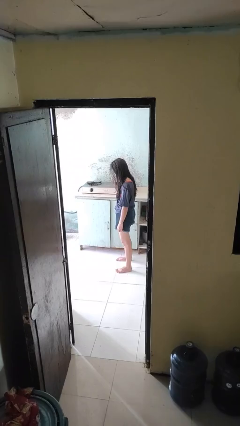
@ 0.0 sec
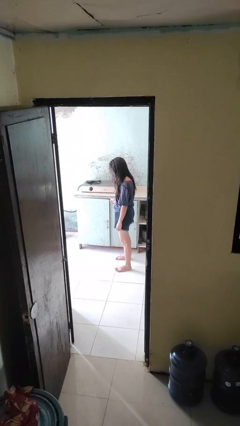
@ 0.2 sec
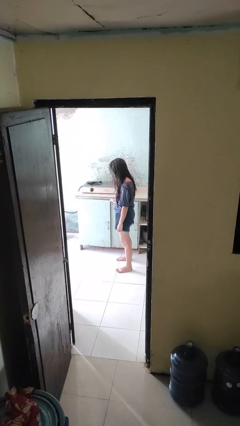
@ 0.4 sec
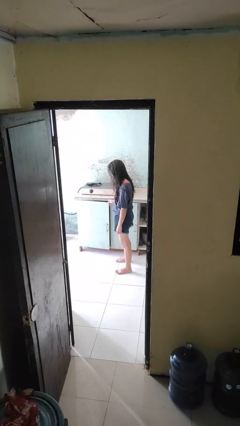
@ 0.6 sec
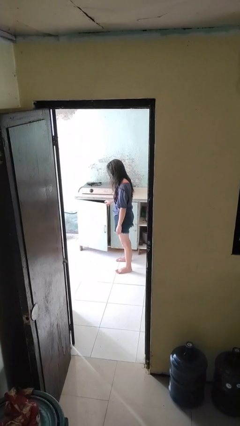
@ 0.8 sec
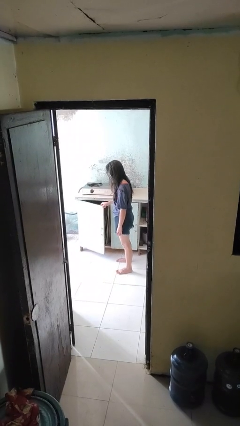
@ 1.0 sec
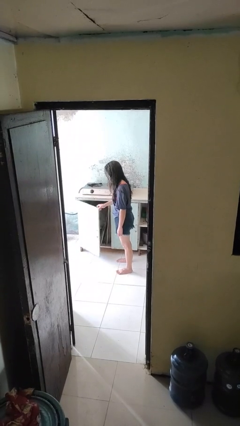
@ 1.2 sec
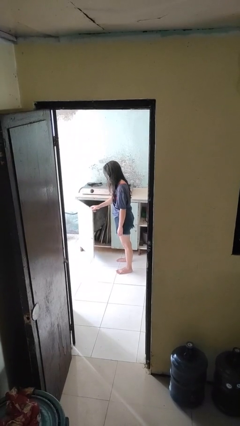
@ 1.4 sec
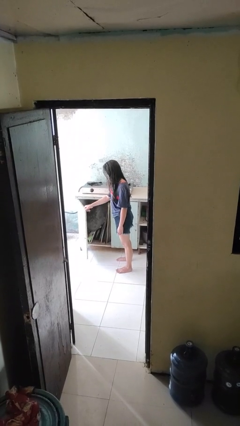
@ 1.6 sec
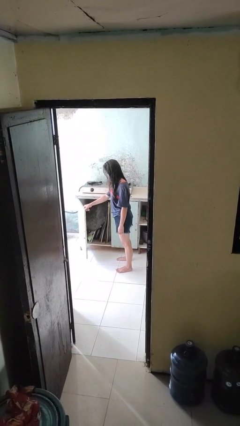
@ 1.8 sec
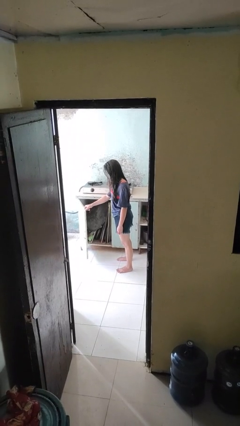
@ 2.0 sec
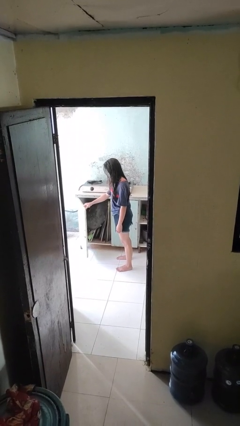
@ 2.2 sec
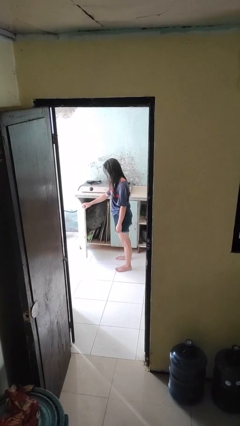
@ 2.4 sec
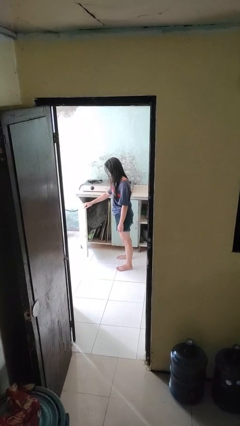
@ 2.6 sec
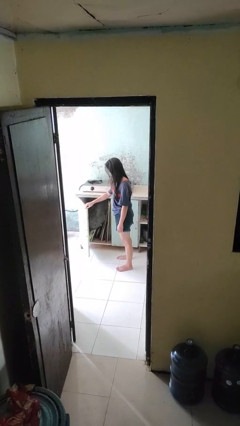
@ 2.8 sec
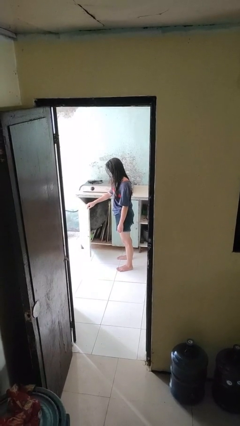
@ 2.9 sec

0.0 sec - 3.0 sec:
person opens cabinet

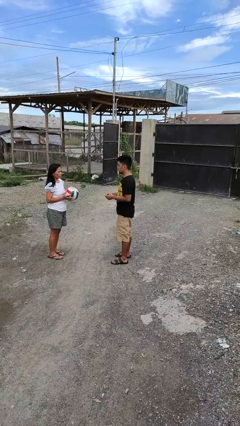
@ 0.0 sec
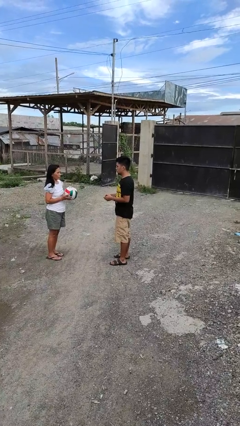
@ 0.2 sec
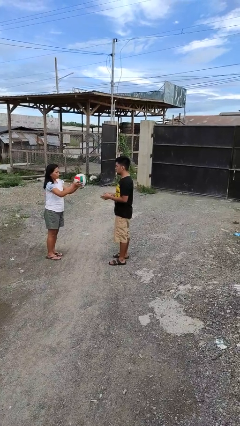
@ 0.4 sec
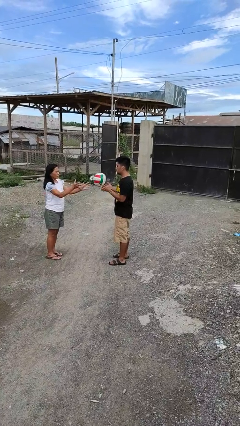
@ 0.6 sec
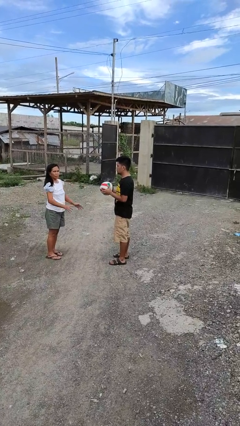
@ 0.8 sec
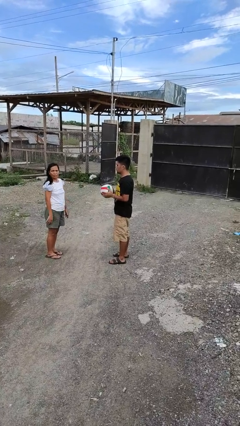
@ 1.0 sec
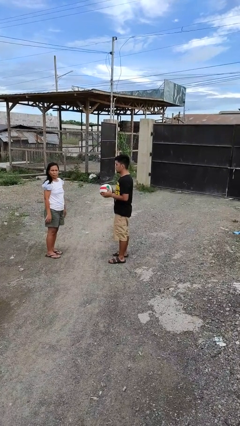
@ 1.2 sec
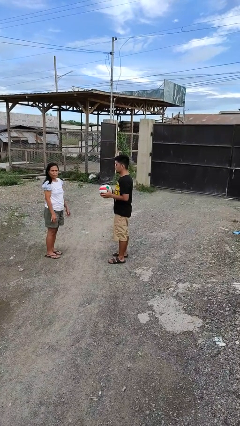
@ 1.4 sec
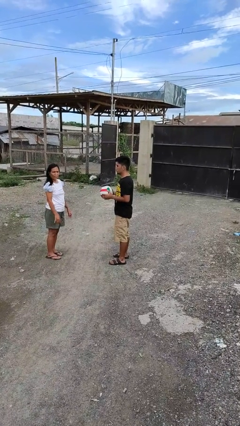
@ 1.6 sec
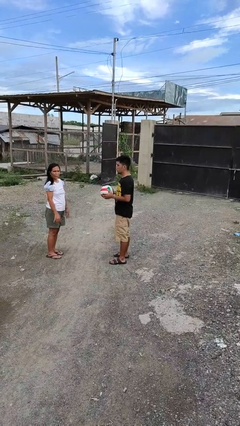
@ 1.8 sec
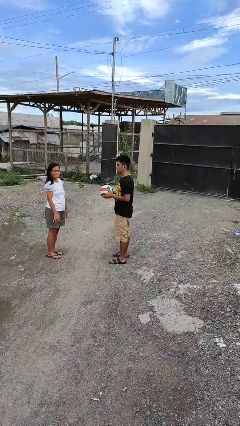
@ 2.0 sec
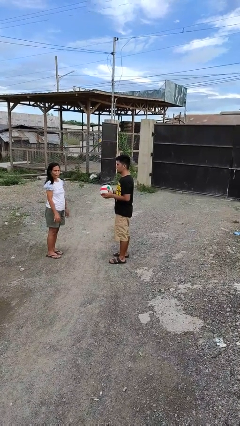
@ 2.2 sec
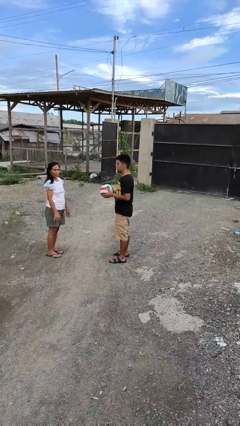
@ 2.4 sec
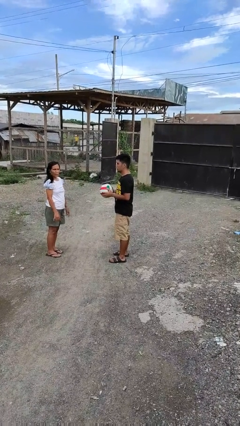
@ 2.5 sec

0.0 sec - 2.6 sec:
person catches object from person

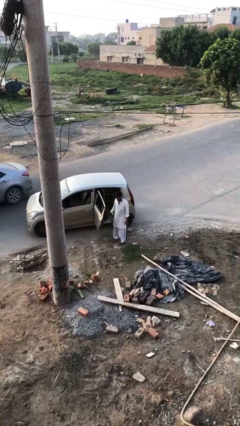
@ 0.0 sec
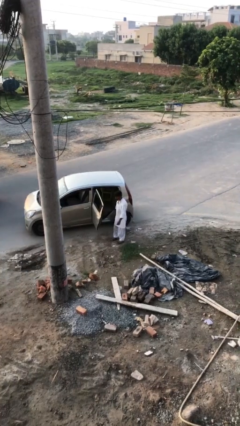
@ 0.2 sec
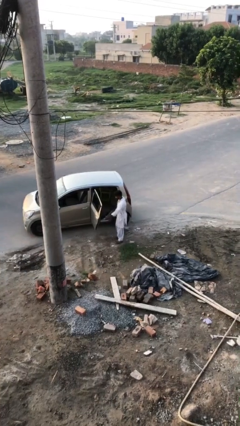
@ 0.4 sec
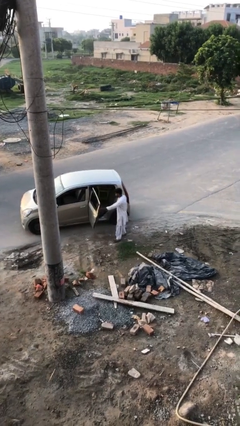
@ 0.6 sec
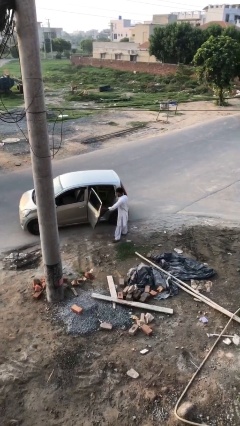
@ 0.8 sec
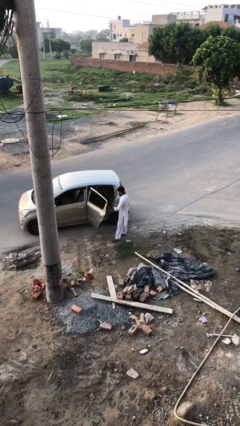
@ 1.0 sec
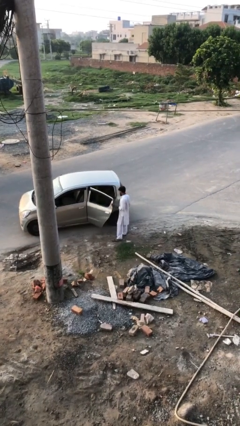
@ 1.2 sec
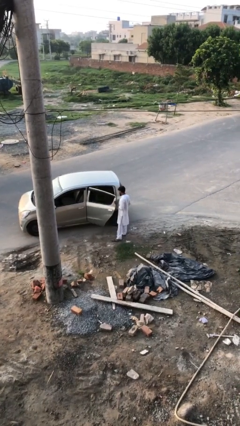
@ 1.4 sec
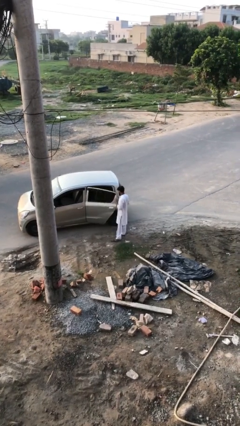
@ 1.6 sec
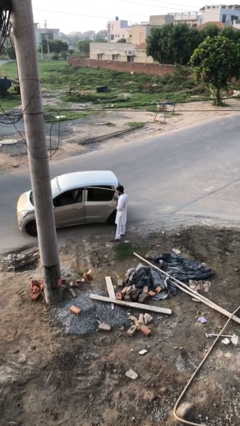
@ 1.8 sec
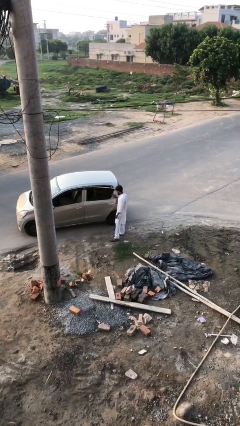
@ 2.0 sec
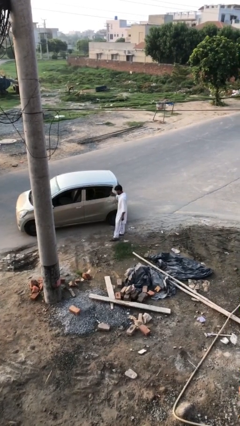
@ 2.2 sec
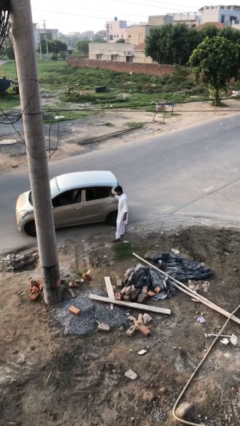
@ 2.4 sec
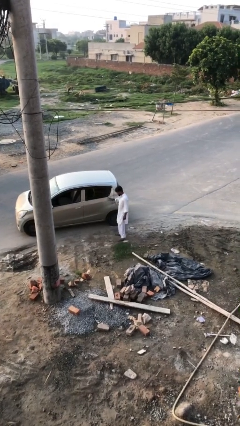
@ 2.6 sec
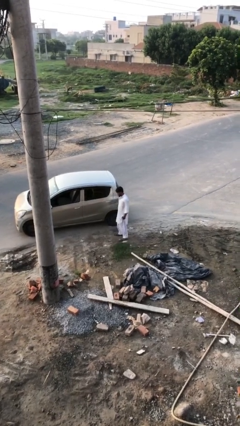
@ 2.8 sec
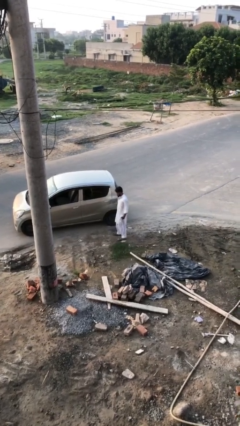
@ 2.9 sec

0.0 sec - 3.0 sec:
person closes car door

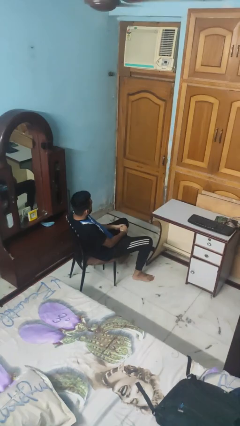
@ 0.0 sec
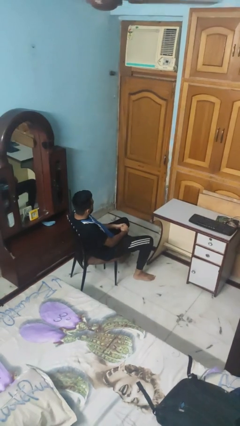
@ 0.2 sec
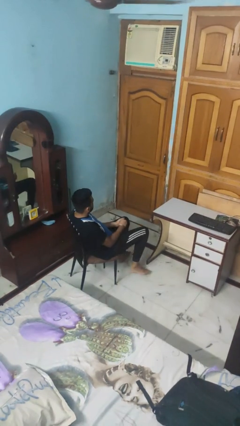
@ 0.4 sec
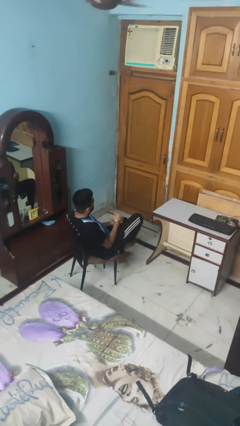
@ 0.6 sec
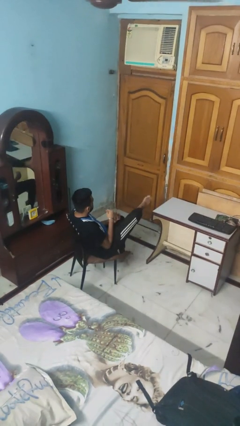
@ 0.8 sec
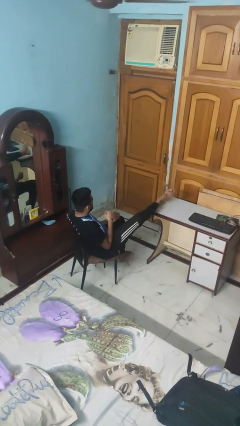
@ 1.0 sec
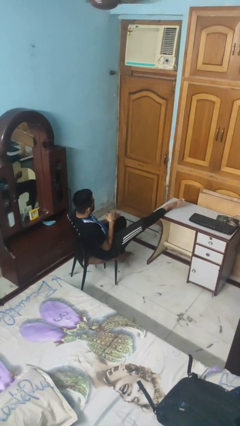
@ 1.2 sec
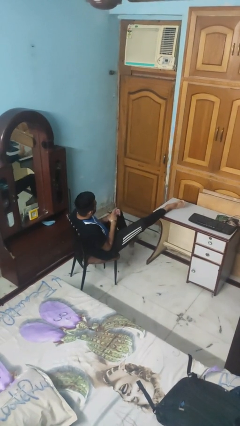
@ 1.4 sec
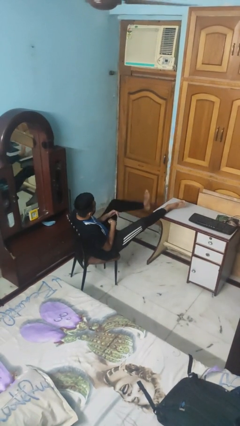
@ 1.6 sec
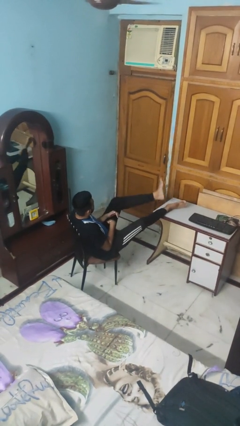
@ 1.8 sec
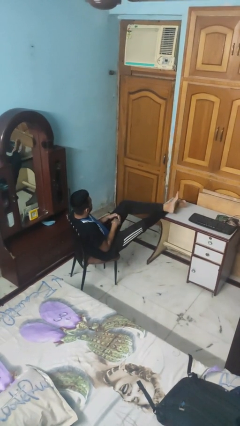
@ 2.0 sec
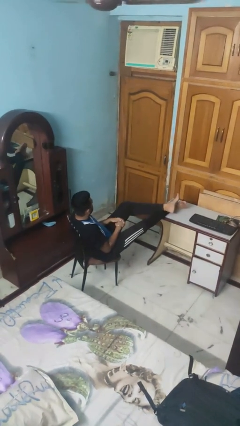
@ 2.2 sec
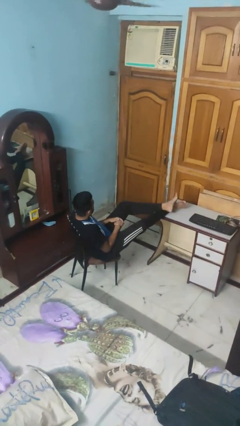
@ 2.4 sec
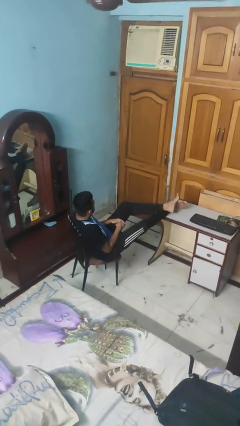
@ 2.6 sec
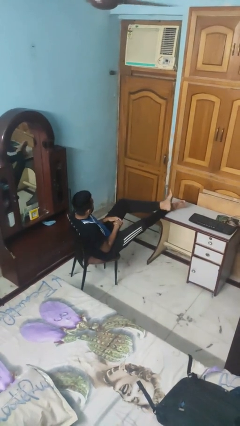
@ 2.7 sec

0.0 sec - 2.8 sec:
person puts feet up

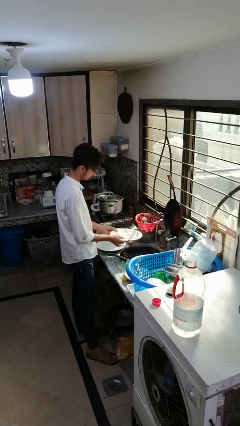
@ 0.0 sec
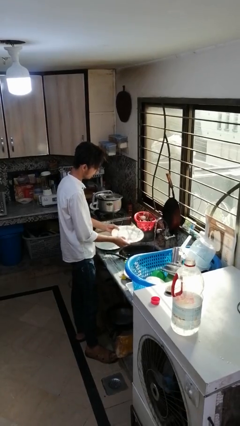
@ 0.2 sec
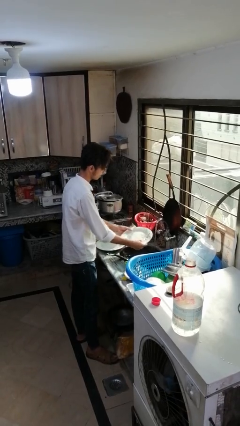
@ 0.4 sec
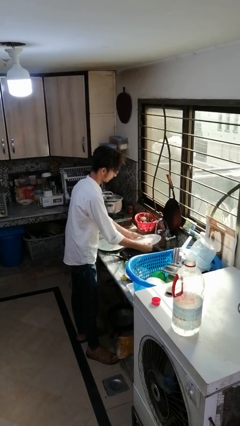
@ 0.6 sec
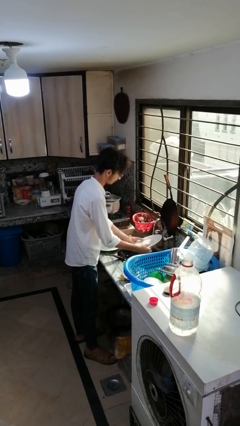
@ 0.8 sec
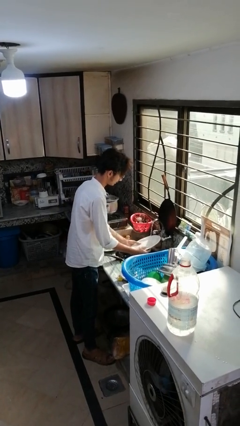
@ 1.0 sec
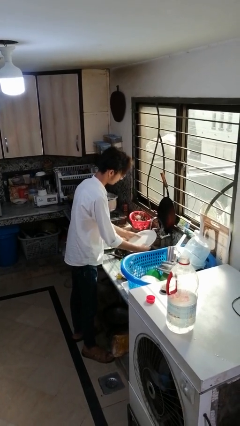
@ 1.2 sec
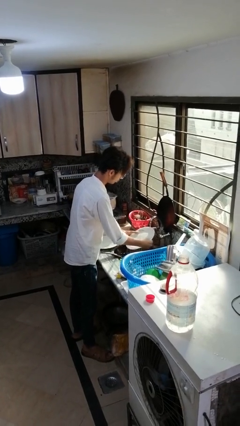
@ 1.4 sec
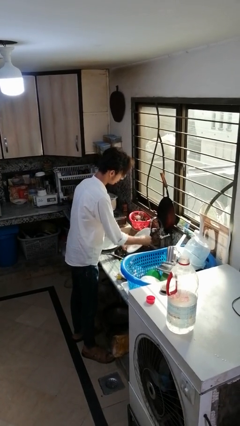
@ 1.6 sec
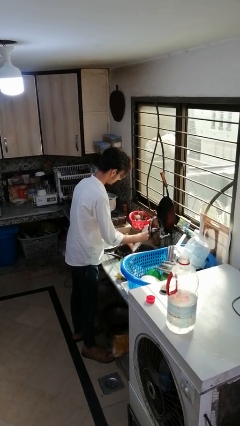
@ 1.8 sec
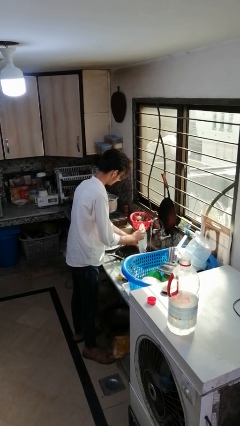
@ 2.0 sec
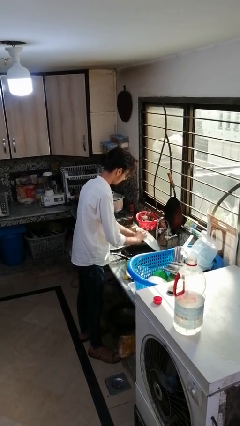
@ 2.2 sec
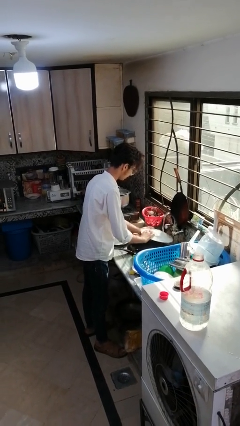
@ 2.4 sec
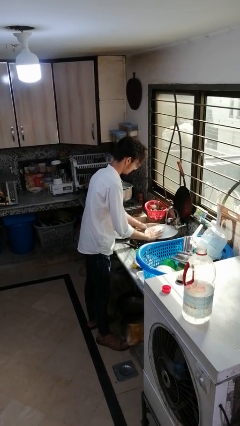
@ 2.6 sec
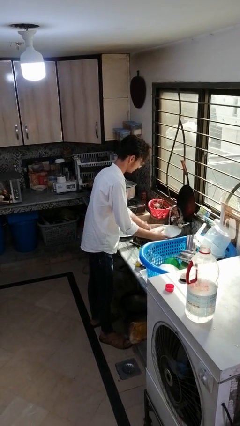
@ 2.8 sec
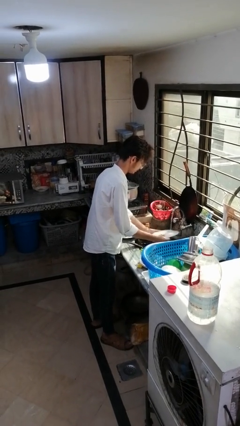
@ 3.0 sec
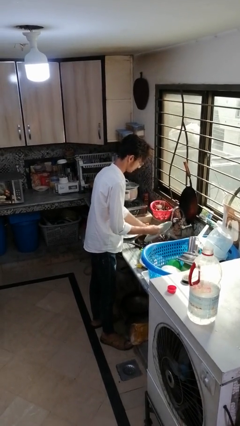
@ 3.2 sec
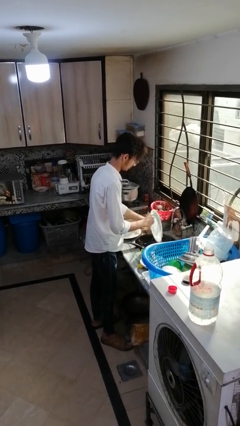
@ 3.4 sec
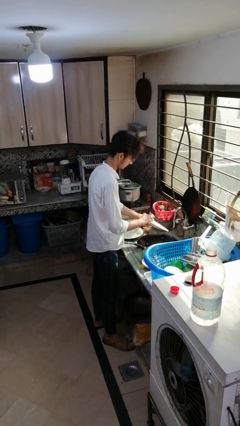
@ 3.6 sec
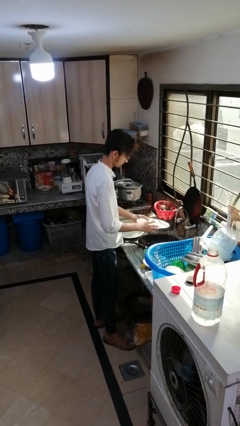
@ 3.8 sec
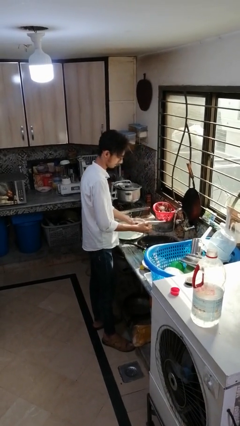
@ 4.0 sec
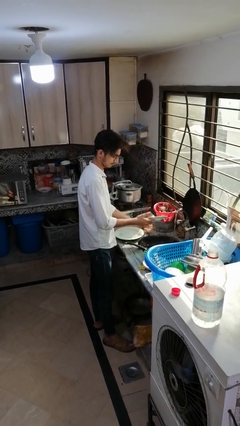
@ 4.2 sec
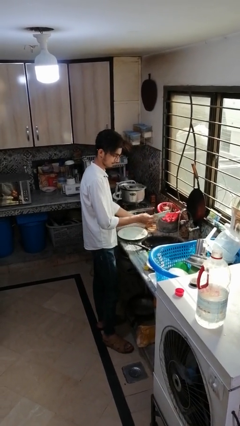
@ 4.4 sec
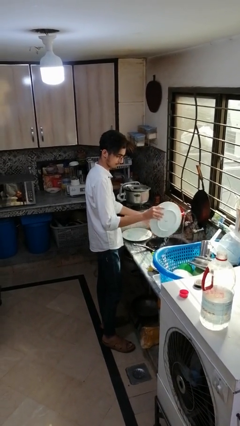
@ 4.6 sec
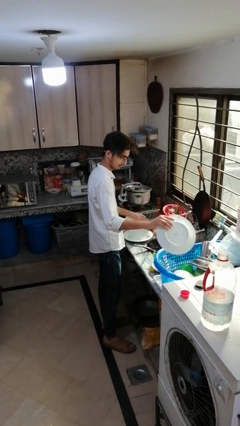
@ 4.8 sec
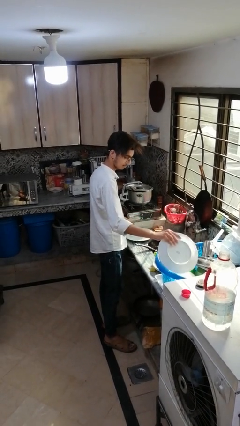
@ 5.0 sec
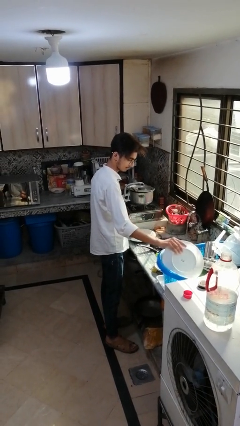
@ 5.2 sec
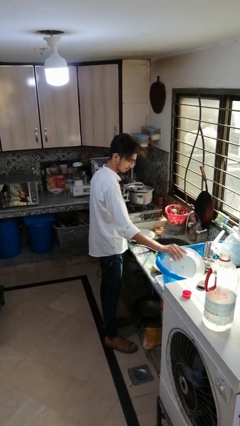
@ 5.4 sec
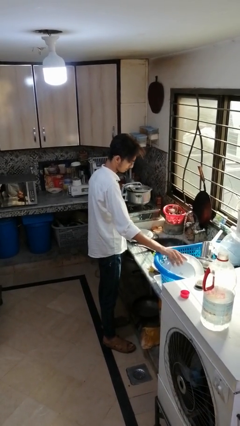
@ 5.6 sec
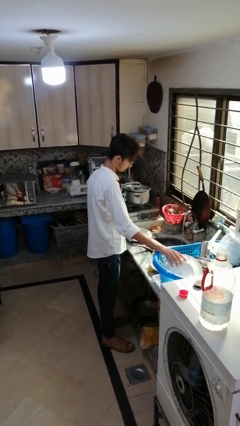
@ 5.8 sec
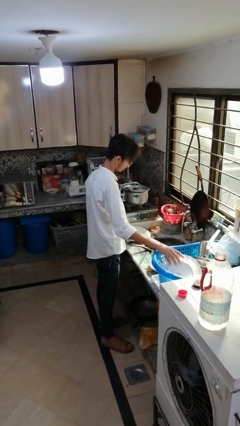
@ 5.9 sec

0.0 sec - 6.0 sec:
person washes dish
